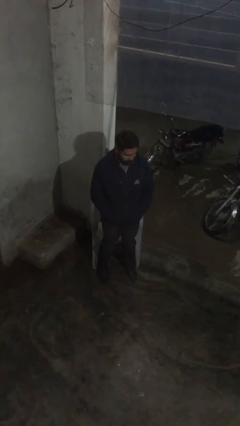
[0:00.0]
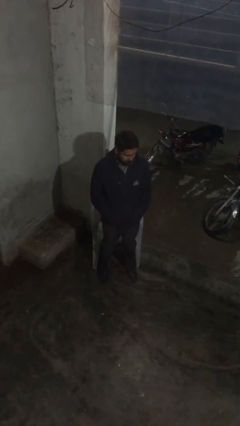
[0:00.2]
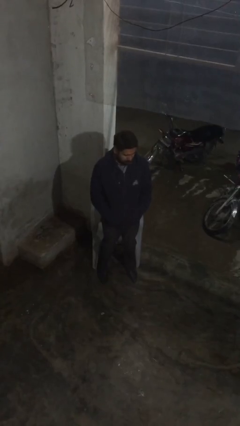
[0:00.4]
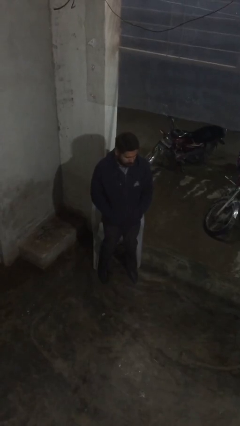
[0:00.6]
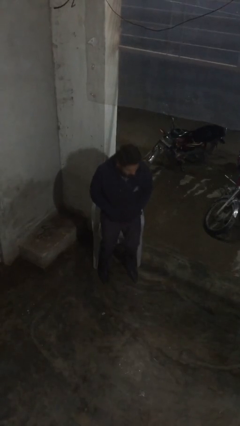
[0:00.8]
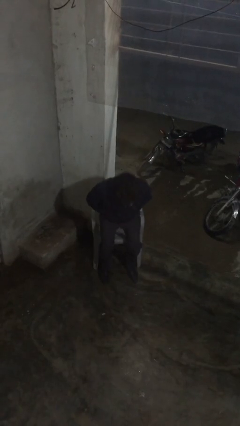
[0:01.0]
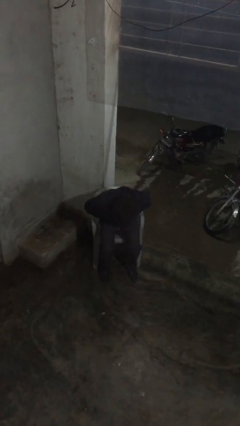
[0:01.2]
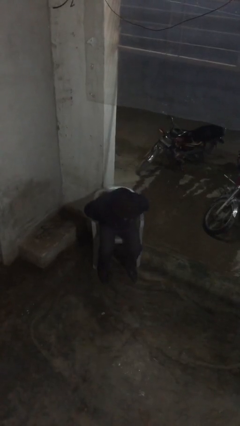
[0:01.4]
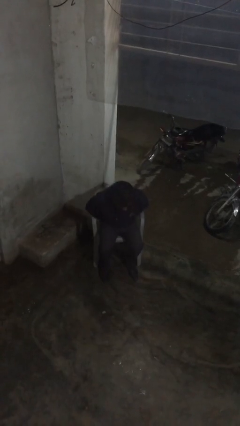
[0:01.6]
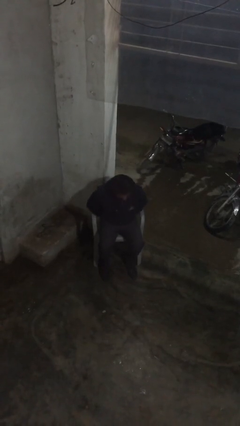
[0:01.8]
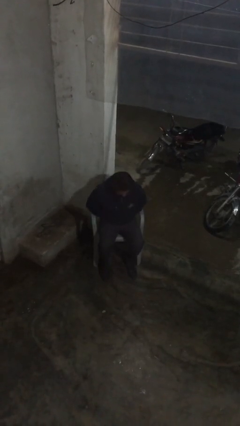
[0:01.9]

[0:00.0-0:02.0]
person sits down

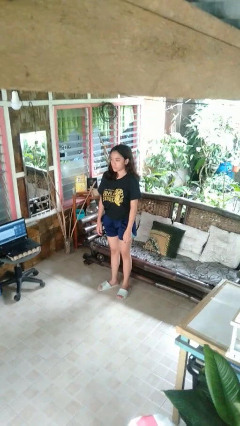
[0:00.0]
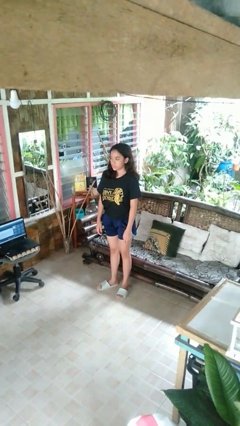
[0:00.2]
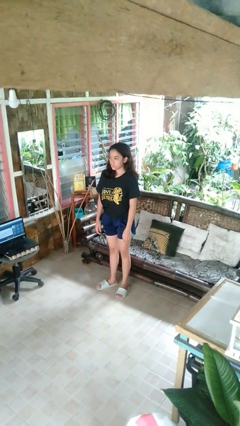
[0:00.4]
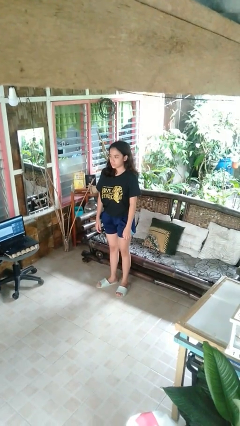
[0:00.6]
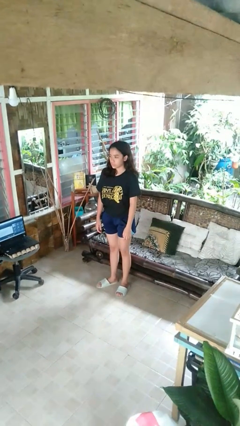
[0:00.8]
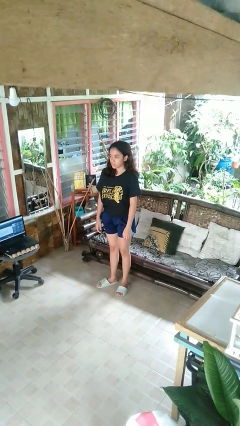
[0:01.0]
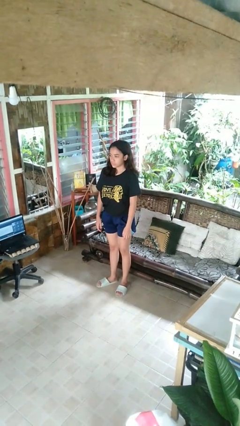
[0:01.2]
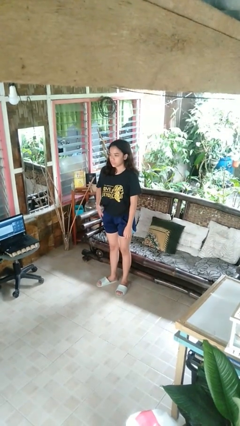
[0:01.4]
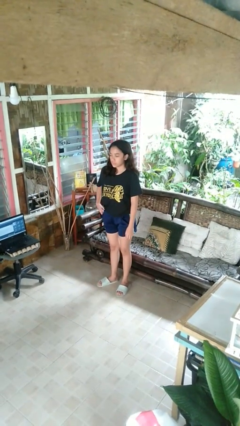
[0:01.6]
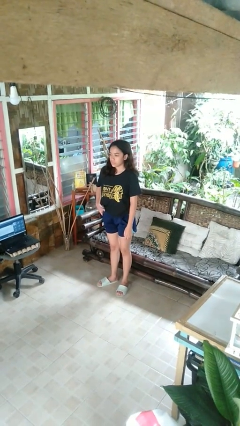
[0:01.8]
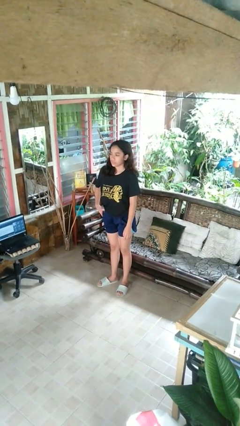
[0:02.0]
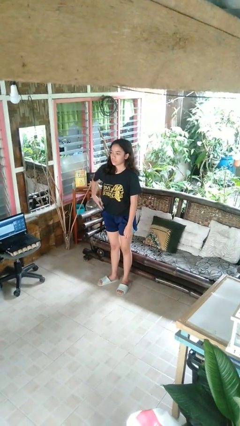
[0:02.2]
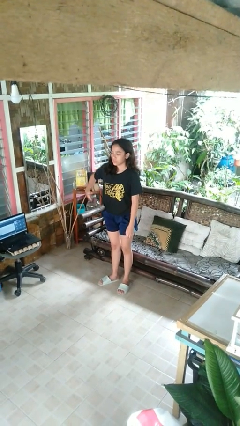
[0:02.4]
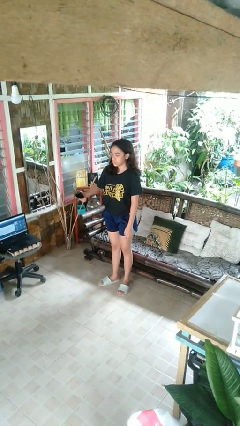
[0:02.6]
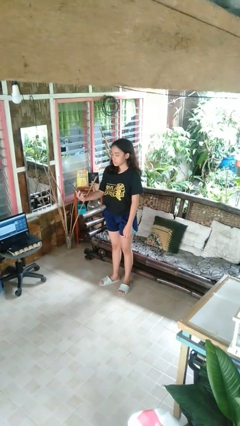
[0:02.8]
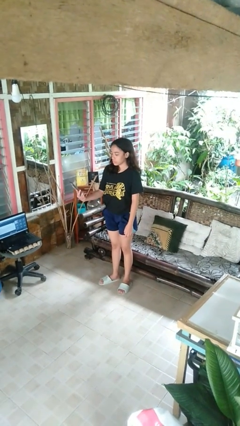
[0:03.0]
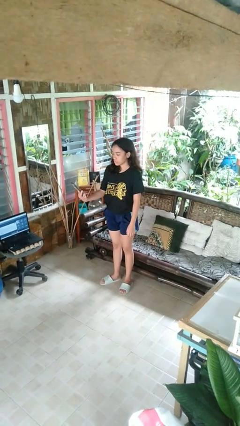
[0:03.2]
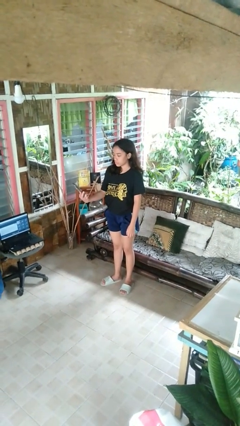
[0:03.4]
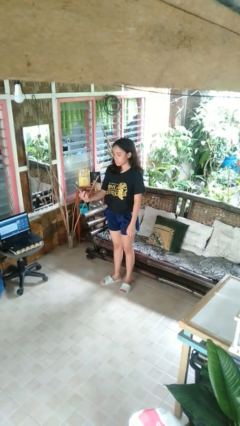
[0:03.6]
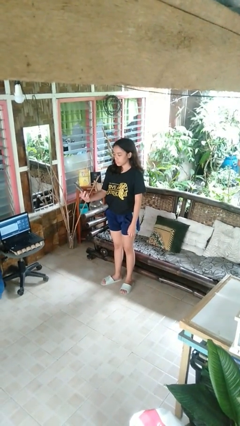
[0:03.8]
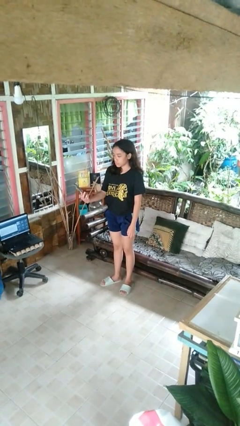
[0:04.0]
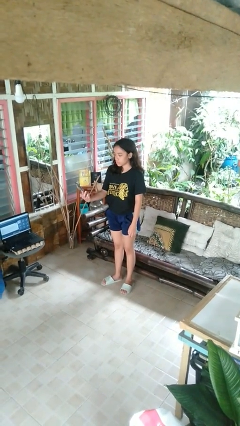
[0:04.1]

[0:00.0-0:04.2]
person takes phone from pocket

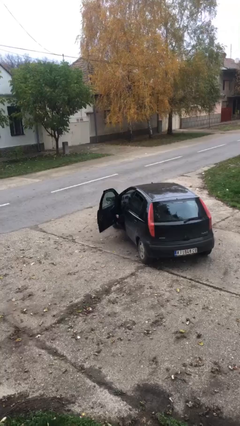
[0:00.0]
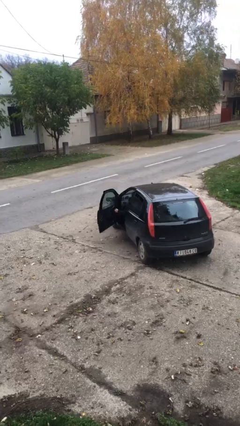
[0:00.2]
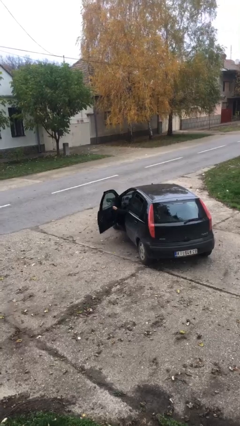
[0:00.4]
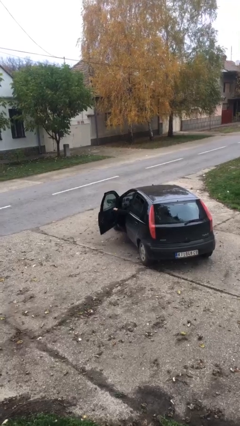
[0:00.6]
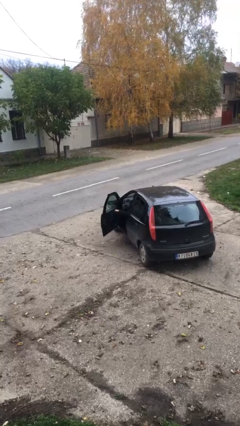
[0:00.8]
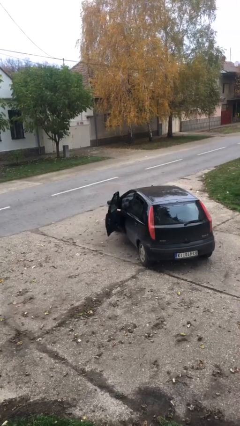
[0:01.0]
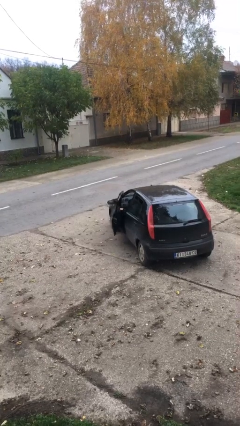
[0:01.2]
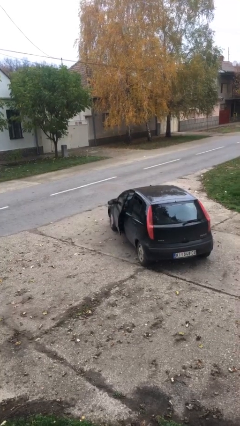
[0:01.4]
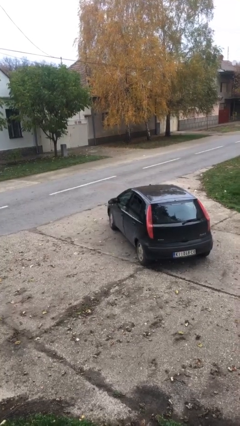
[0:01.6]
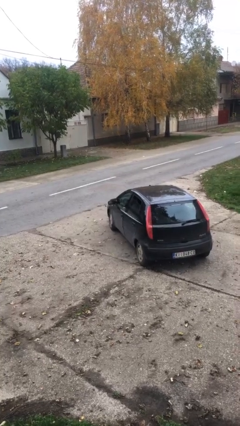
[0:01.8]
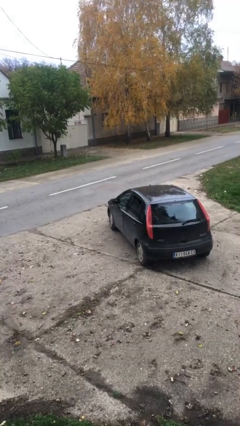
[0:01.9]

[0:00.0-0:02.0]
person closes car door

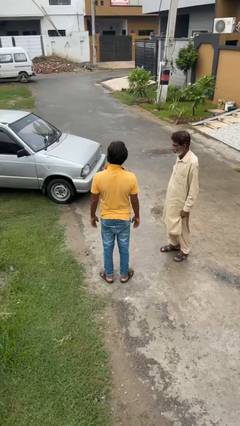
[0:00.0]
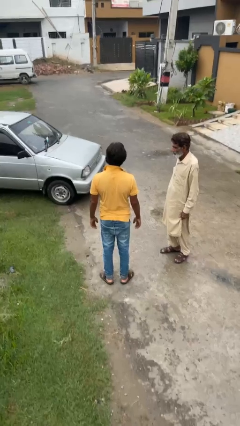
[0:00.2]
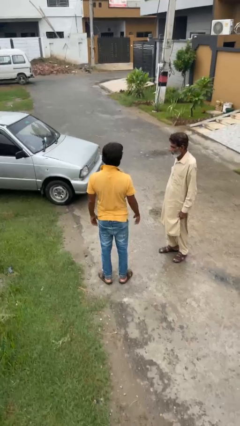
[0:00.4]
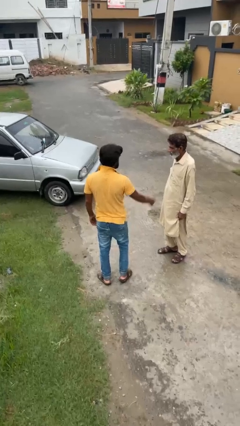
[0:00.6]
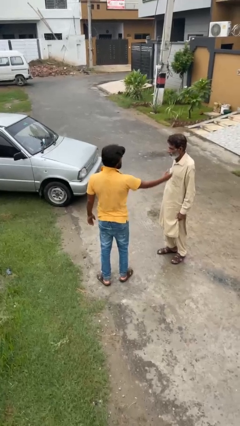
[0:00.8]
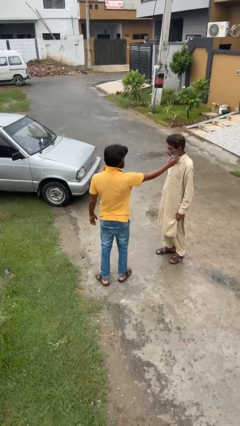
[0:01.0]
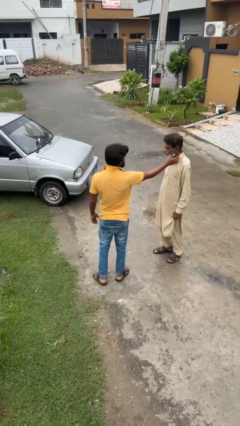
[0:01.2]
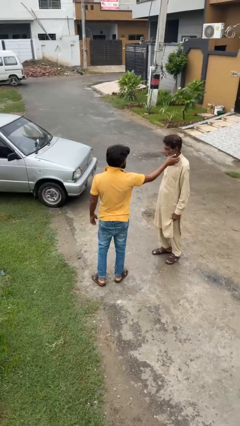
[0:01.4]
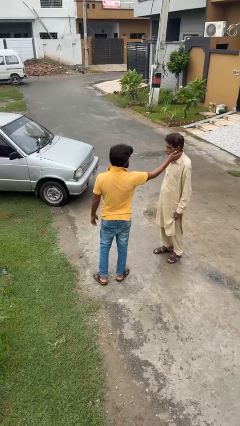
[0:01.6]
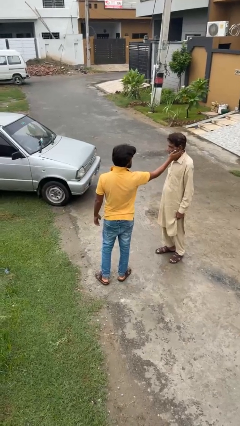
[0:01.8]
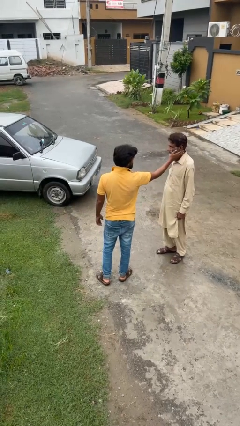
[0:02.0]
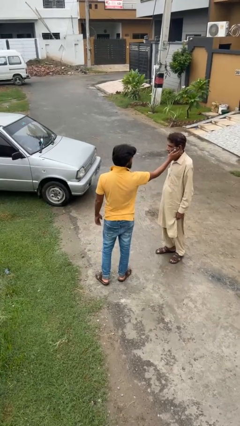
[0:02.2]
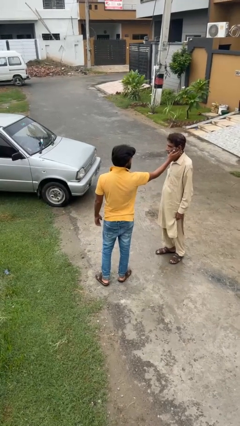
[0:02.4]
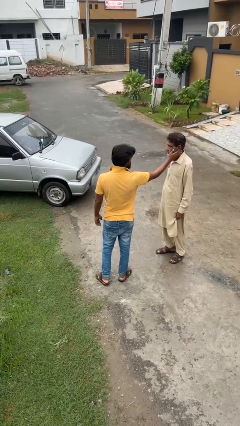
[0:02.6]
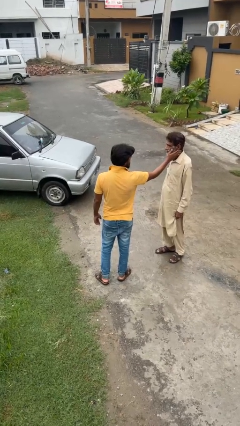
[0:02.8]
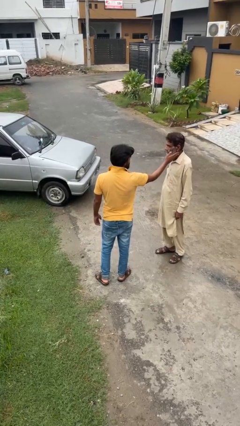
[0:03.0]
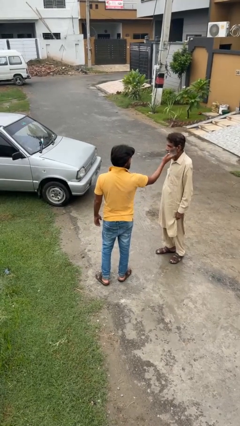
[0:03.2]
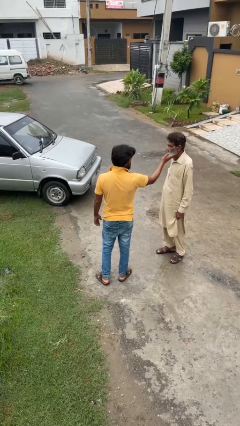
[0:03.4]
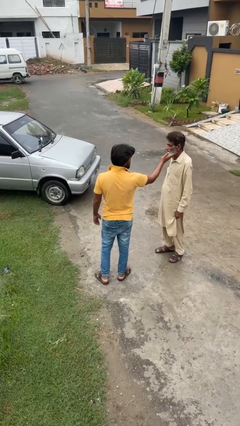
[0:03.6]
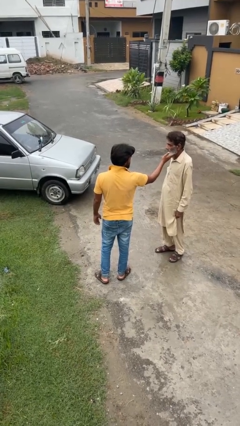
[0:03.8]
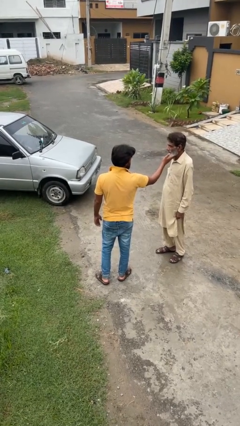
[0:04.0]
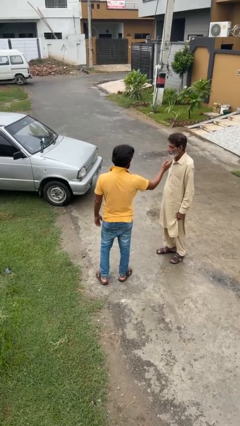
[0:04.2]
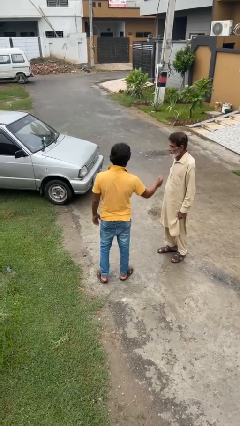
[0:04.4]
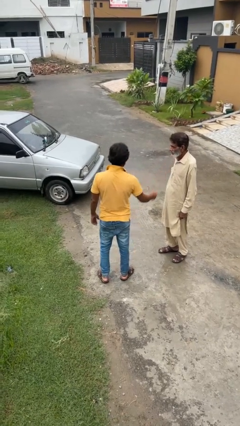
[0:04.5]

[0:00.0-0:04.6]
person touches face of person

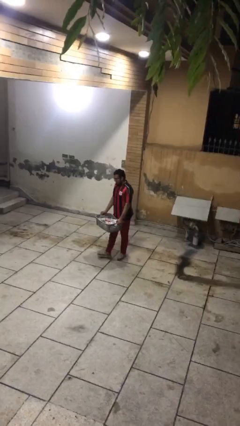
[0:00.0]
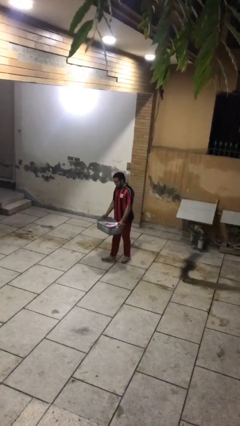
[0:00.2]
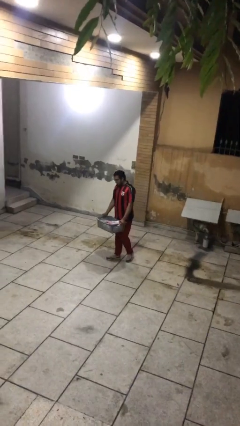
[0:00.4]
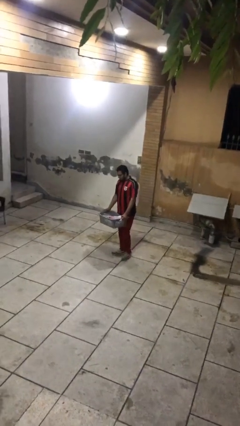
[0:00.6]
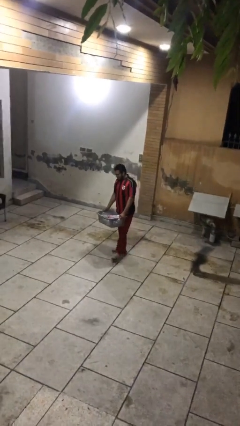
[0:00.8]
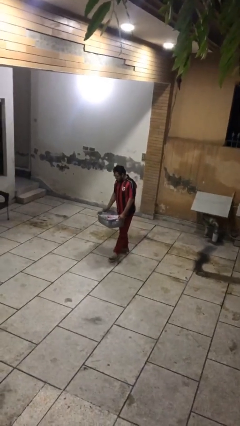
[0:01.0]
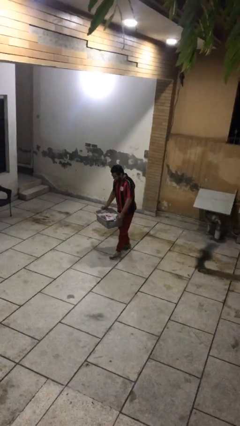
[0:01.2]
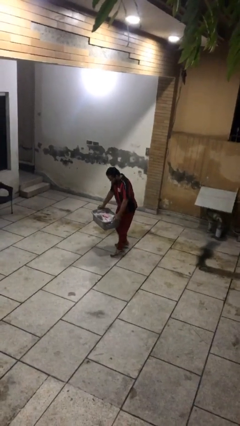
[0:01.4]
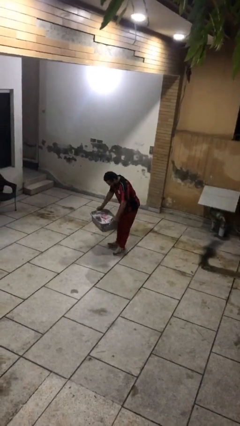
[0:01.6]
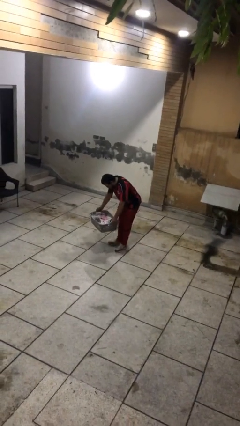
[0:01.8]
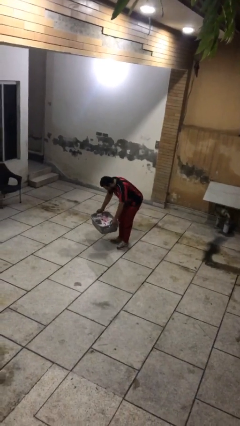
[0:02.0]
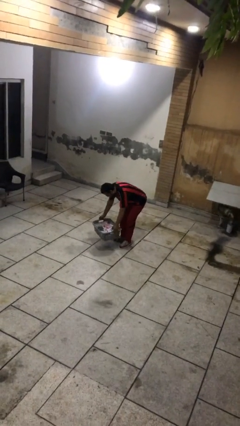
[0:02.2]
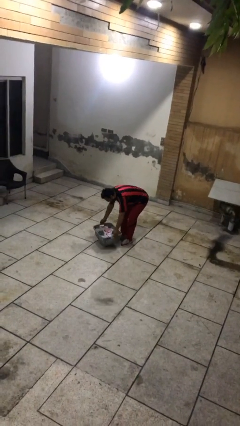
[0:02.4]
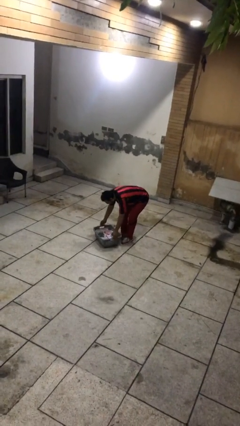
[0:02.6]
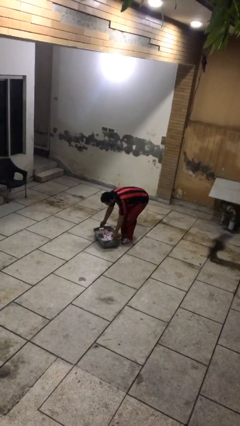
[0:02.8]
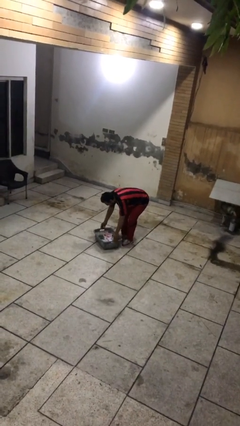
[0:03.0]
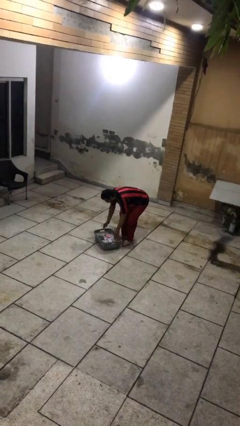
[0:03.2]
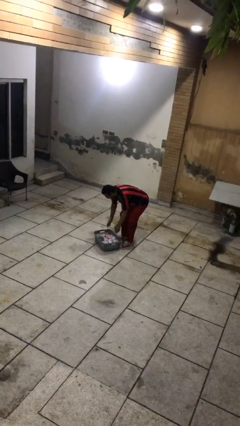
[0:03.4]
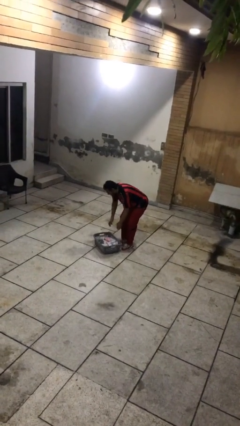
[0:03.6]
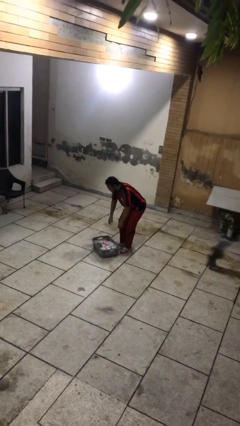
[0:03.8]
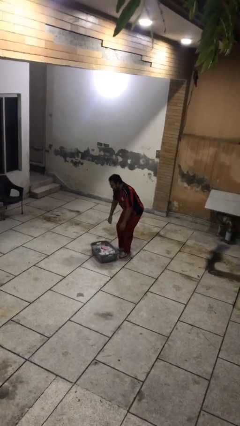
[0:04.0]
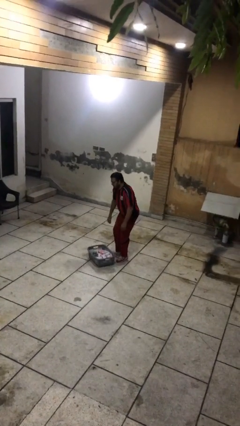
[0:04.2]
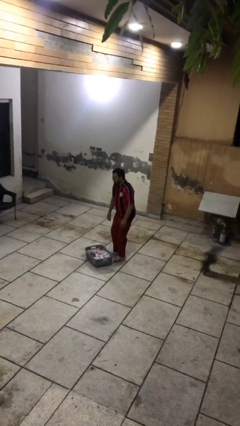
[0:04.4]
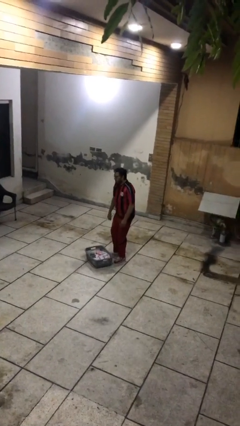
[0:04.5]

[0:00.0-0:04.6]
person puts down object on floor

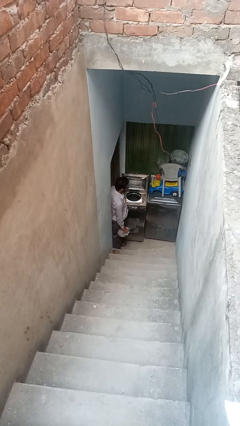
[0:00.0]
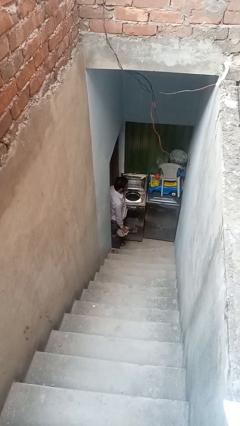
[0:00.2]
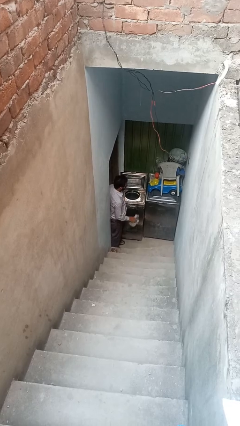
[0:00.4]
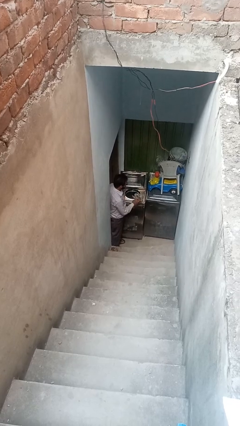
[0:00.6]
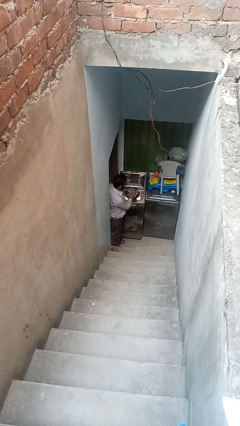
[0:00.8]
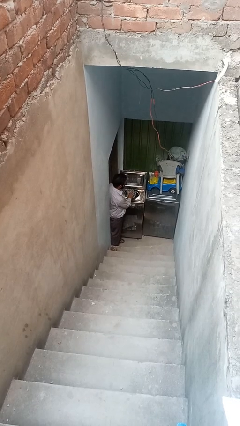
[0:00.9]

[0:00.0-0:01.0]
person loads clotheswasher
